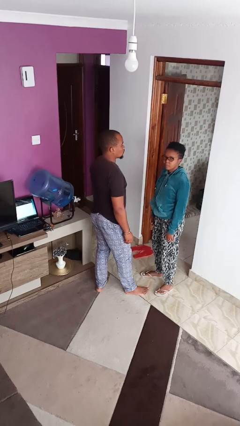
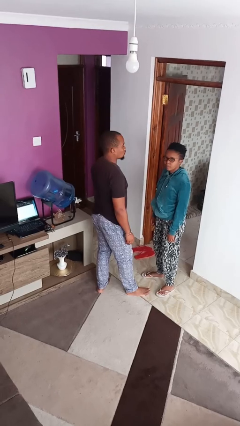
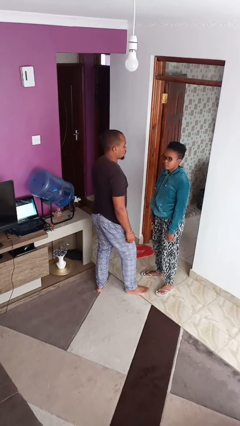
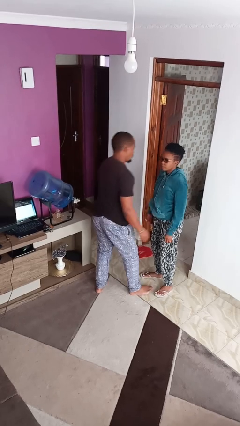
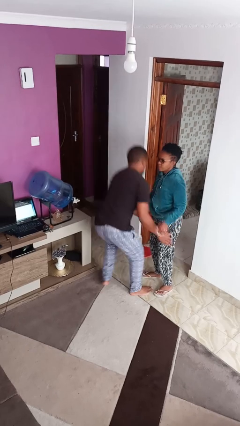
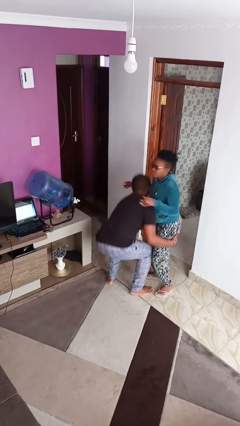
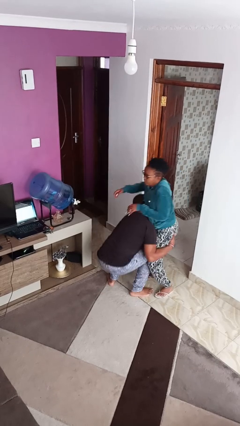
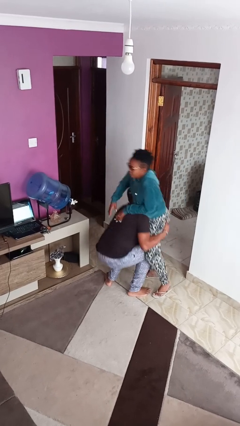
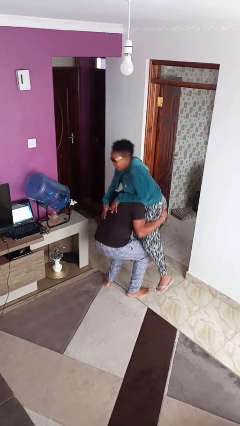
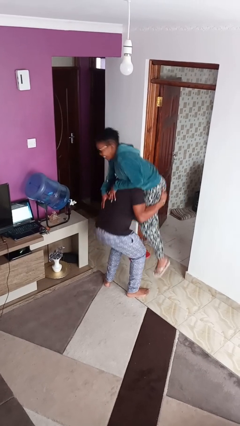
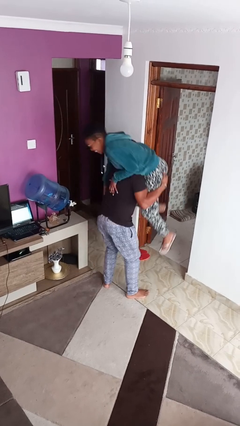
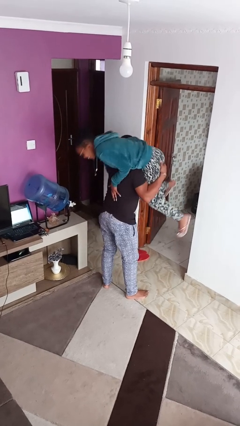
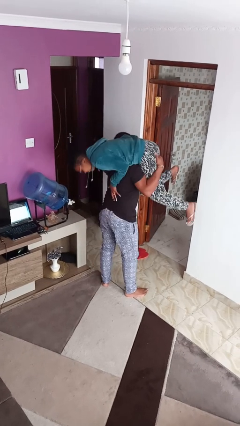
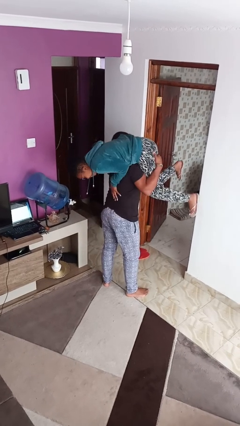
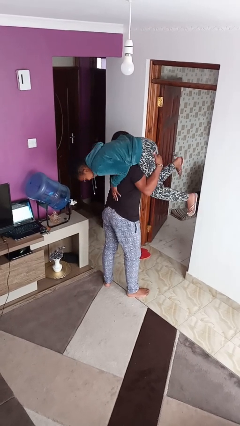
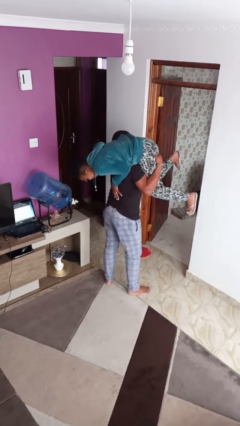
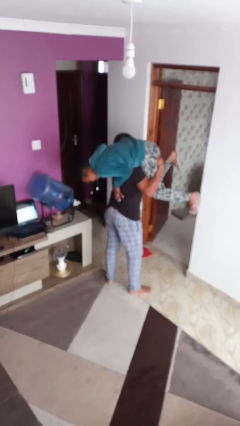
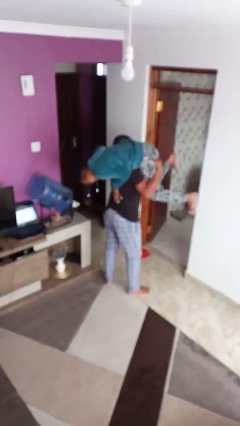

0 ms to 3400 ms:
person carries person over shoulder

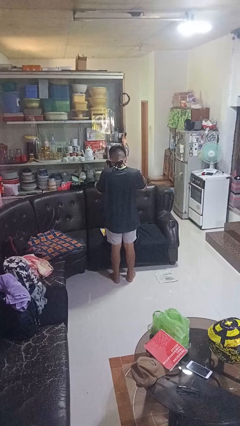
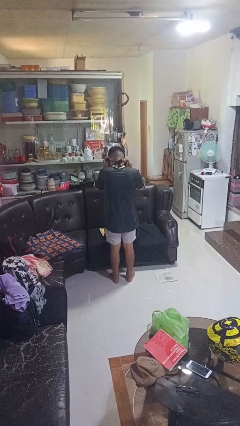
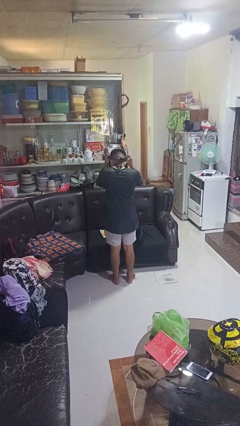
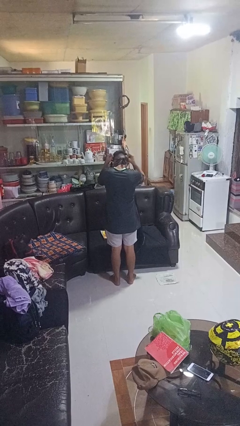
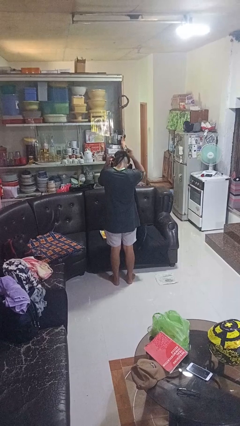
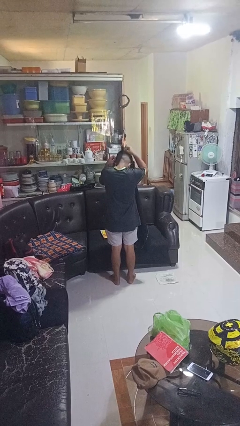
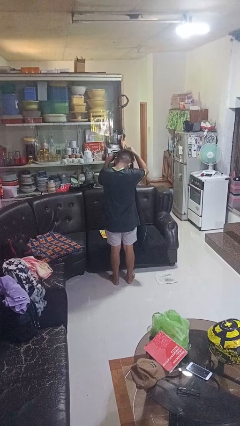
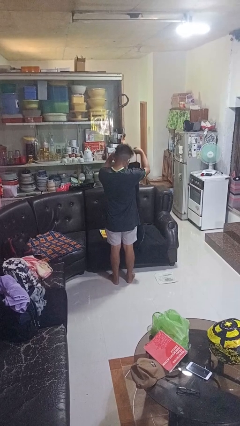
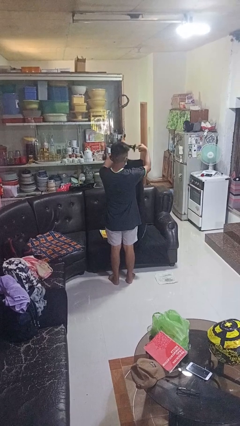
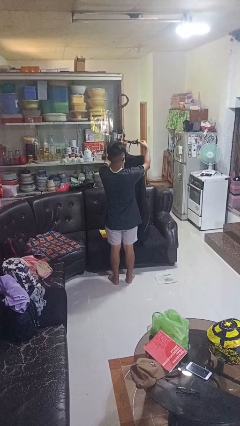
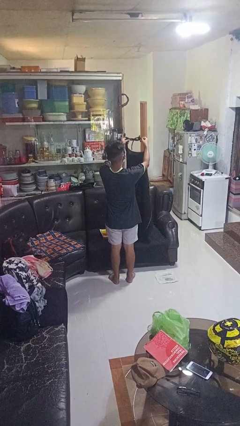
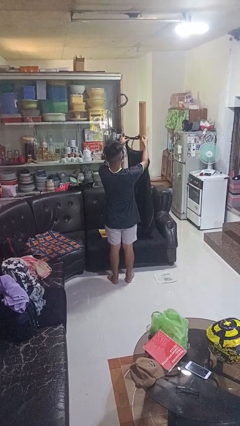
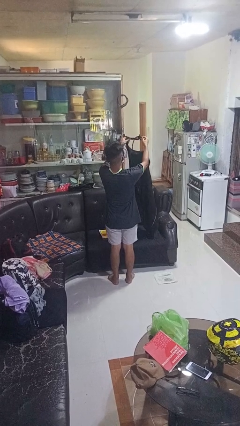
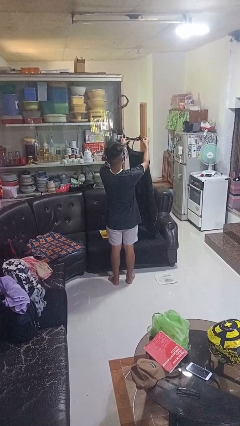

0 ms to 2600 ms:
person takes off apron

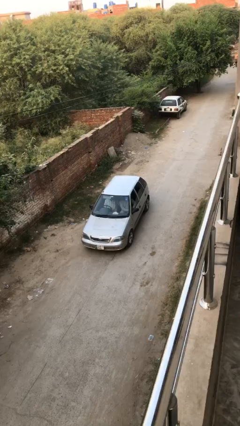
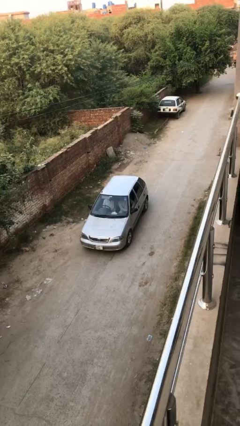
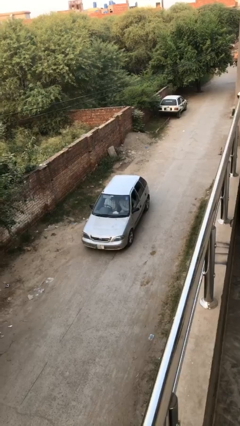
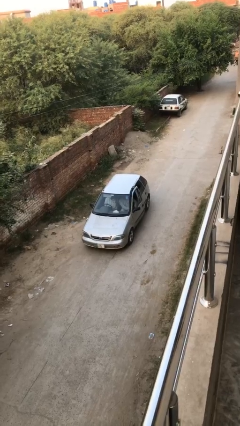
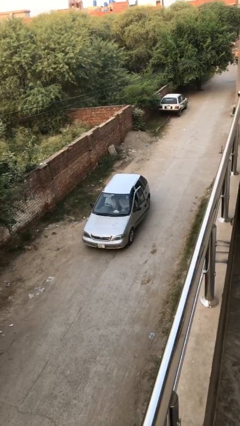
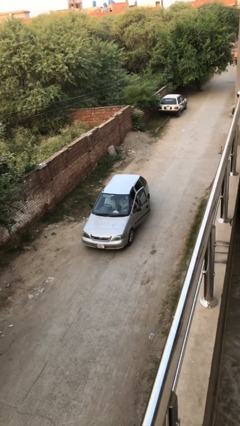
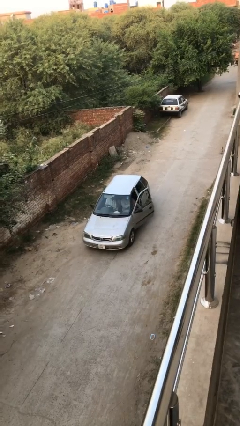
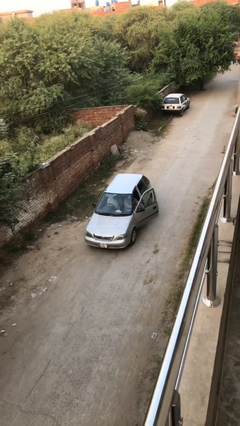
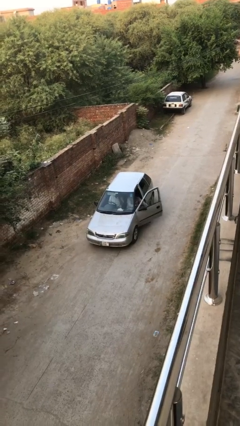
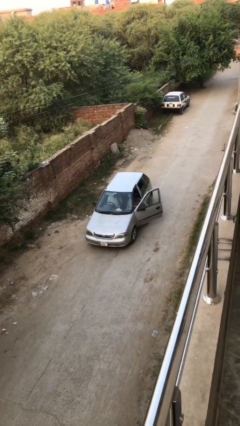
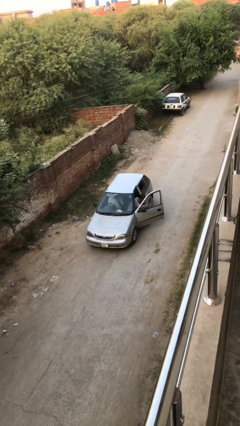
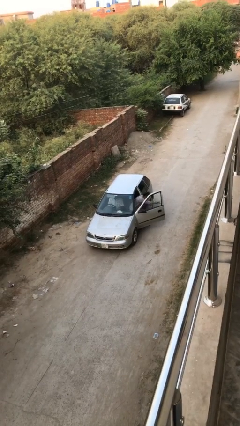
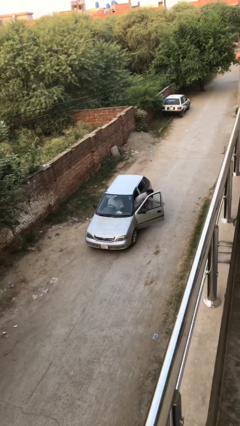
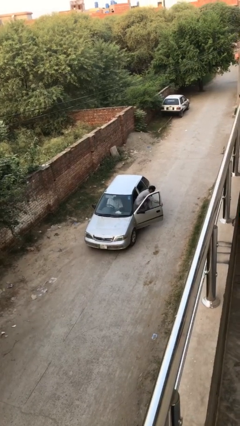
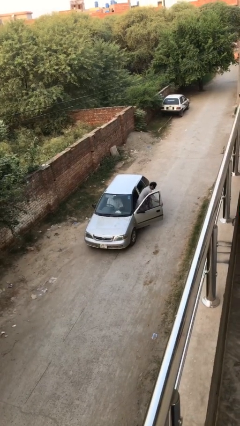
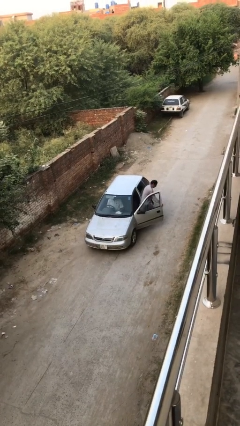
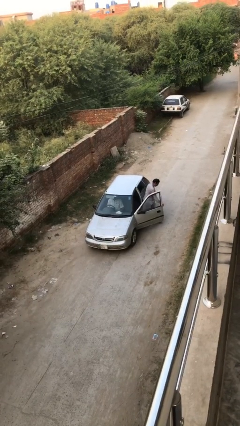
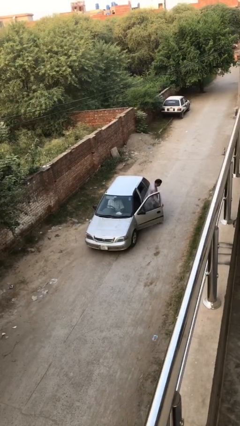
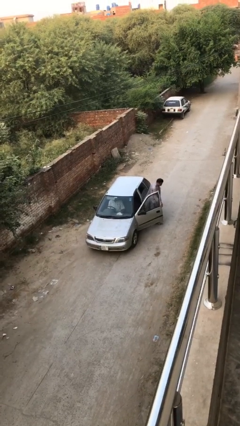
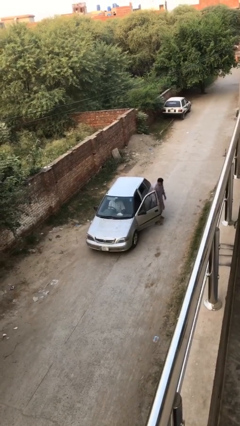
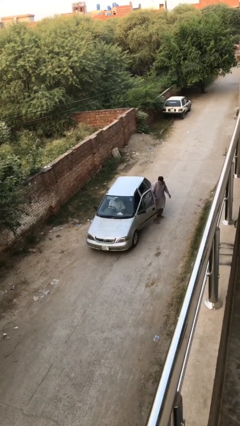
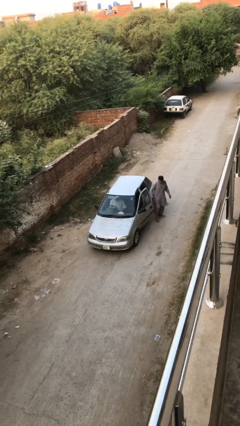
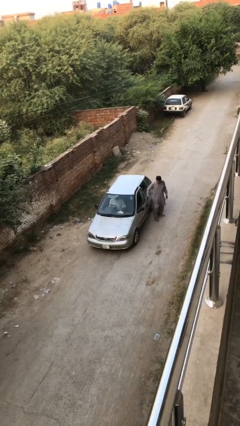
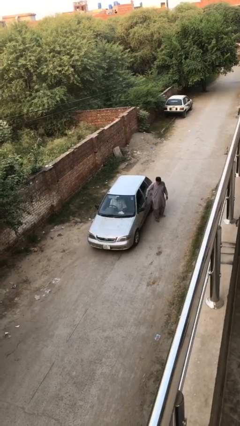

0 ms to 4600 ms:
car drops off person

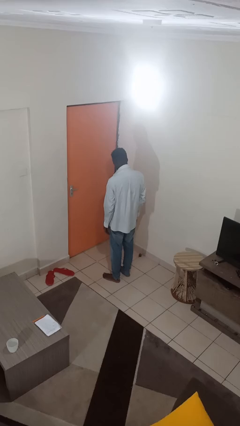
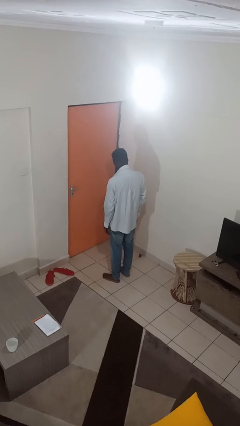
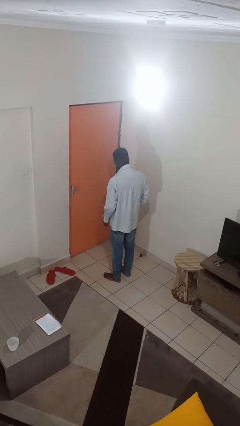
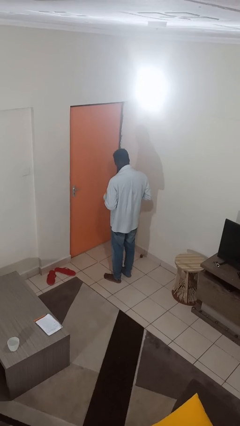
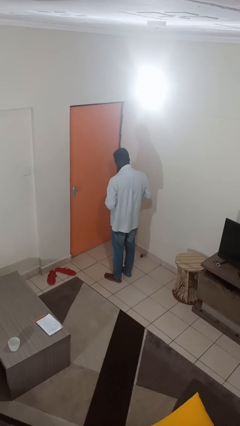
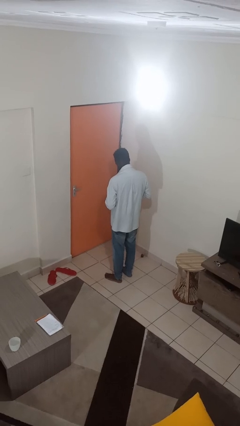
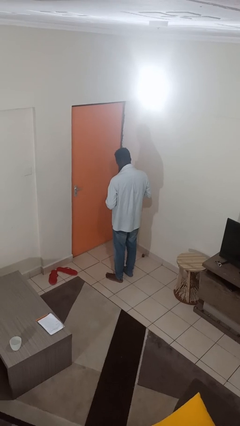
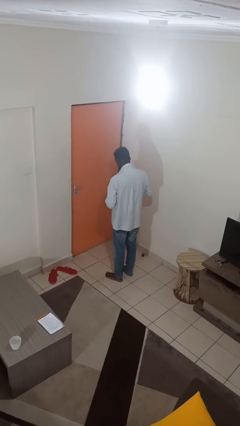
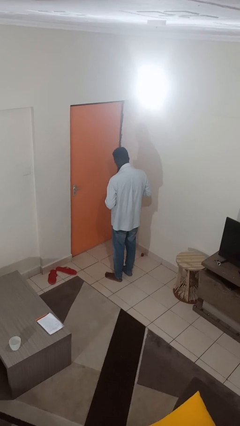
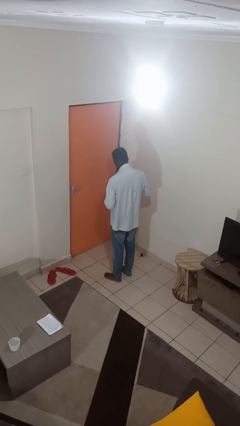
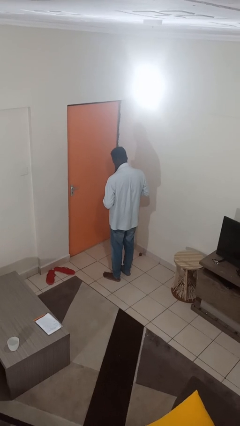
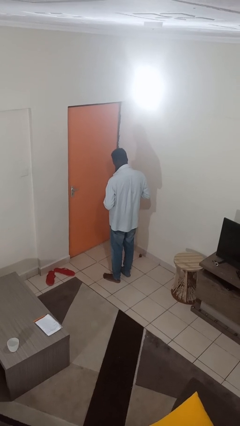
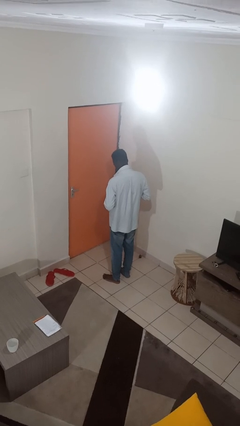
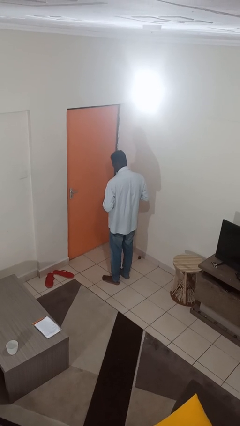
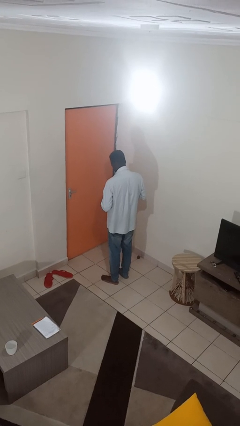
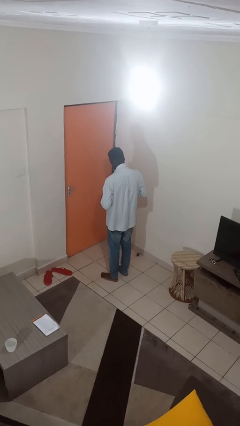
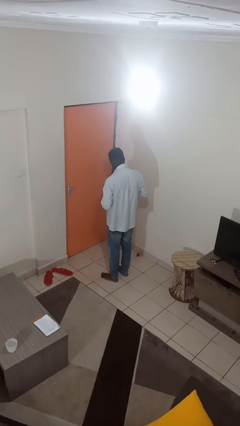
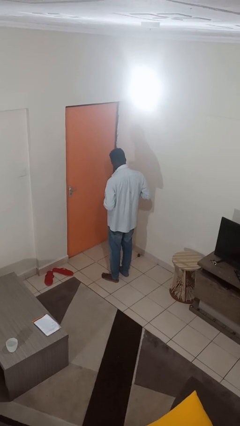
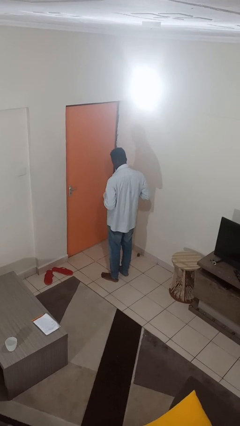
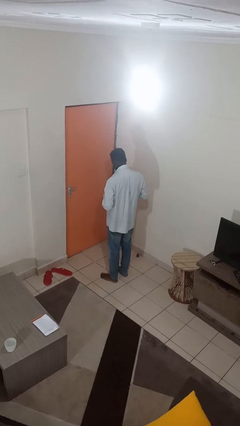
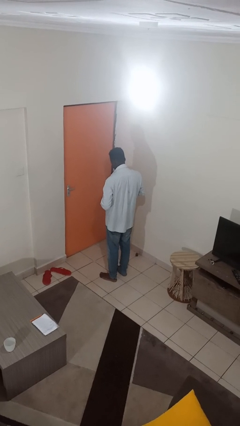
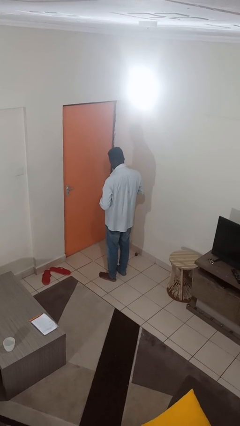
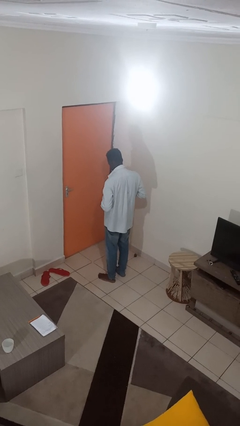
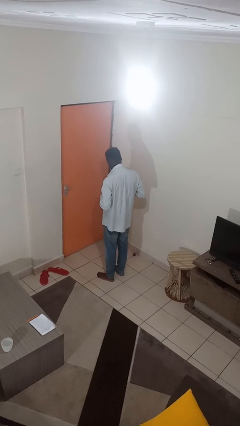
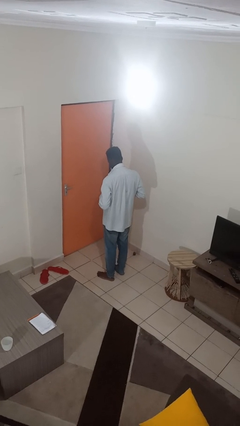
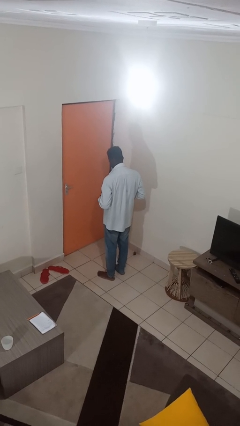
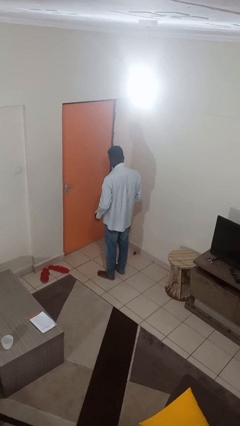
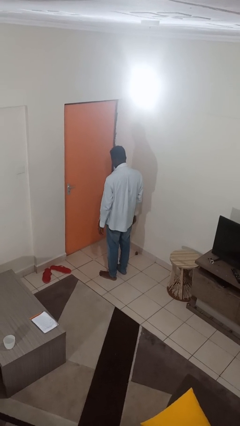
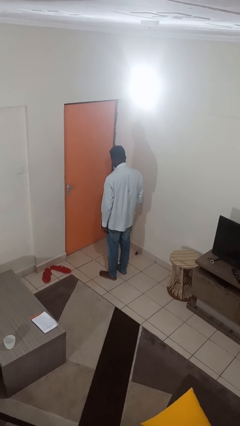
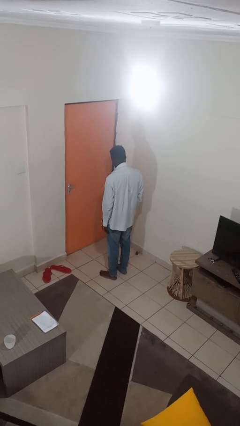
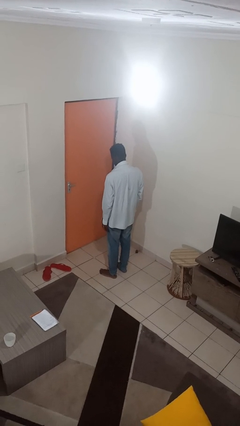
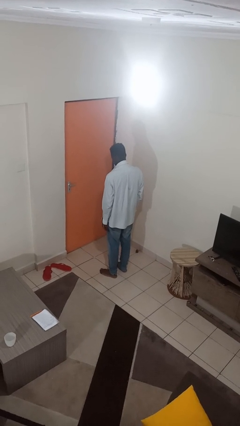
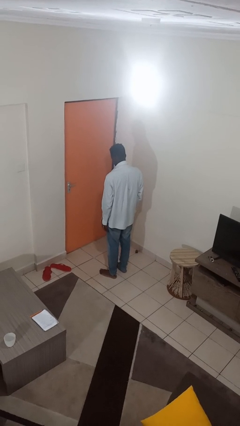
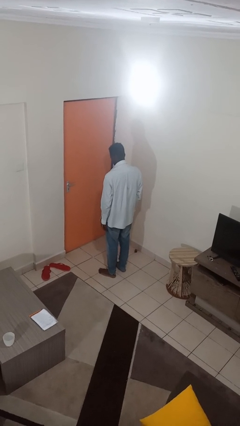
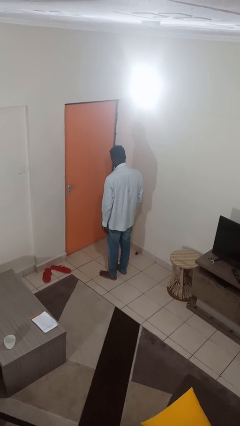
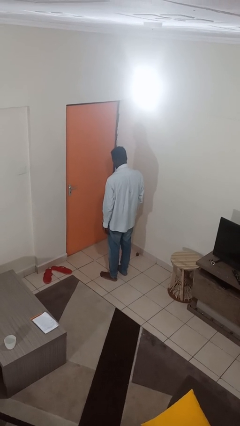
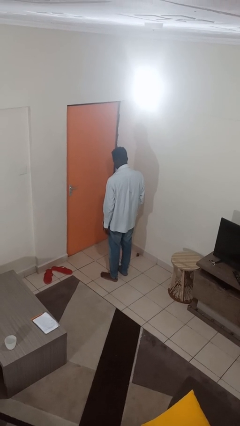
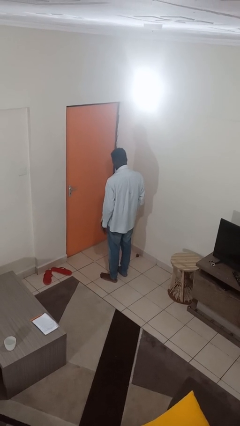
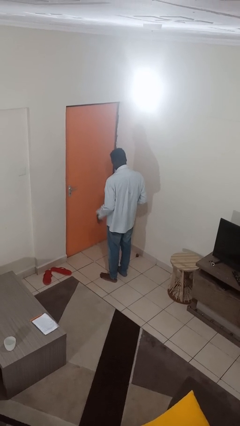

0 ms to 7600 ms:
person unbuttons shirt
